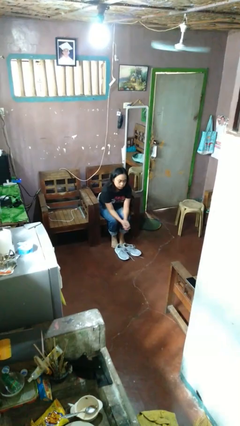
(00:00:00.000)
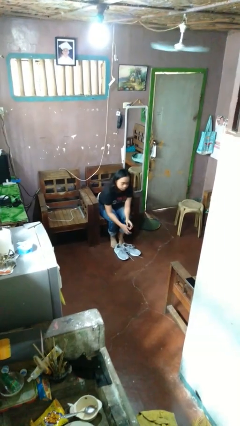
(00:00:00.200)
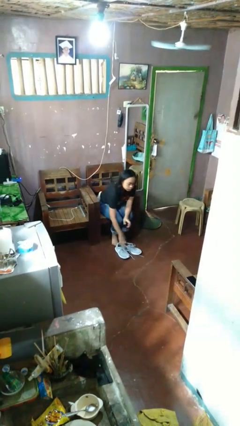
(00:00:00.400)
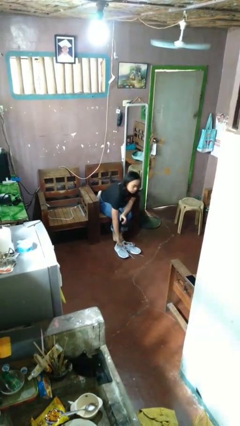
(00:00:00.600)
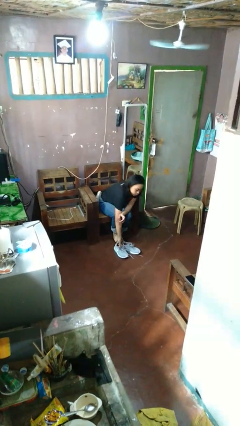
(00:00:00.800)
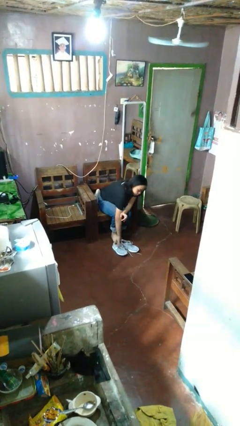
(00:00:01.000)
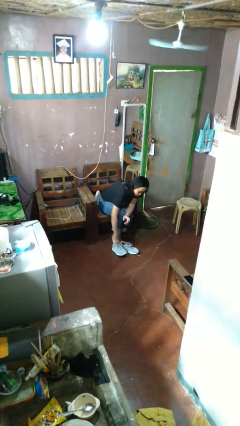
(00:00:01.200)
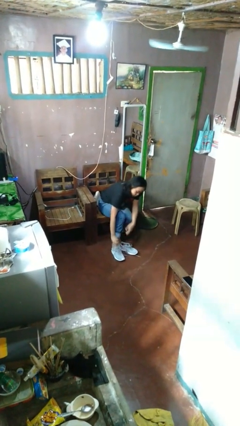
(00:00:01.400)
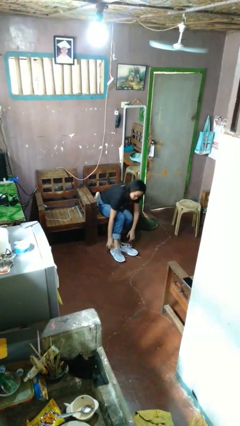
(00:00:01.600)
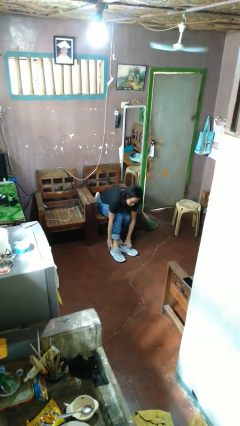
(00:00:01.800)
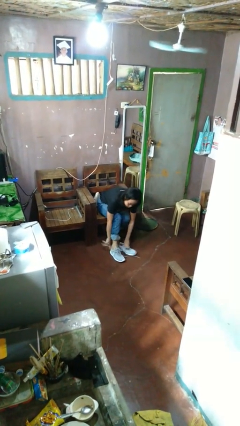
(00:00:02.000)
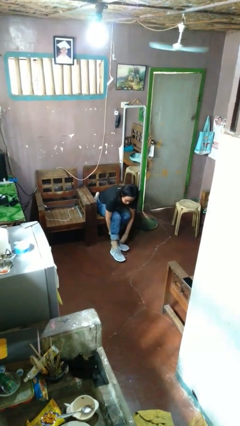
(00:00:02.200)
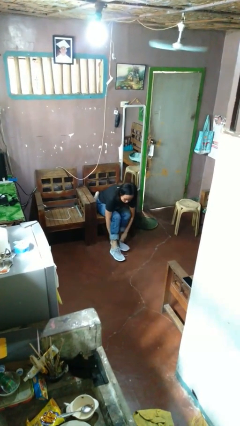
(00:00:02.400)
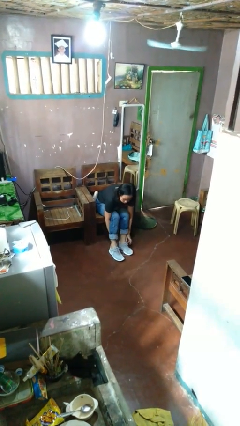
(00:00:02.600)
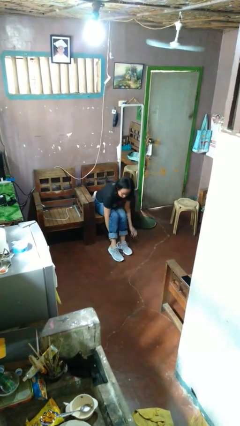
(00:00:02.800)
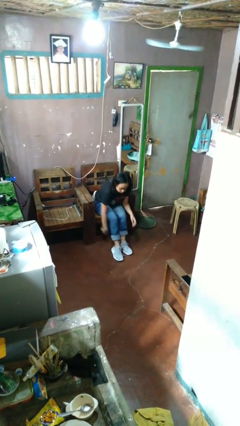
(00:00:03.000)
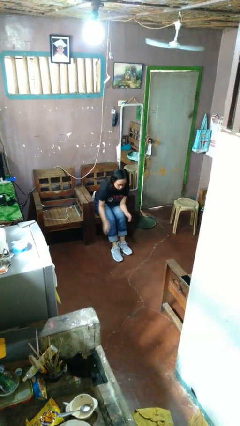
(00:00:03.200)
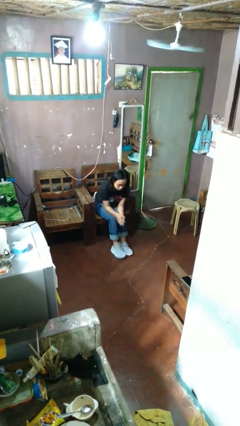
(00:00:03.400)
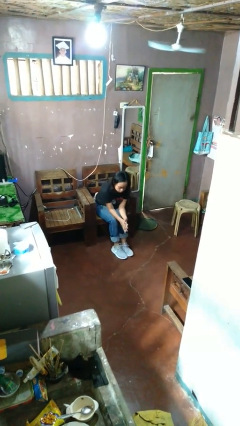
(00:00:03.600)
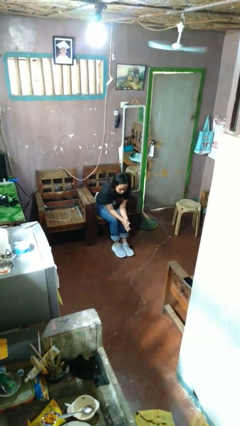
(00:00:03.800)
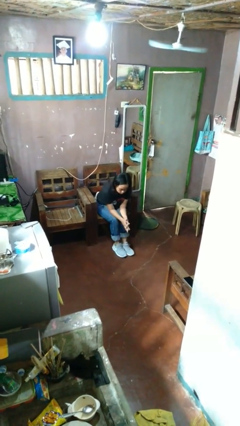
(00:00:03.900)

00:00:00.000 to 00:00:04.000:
person puts on shoes

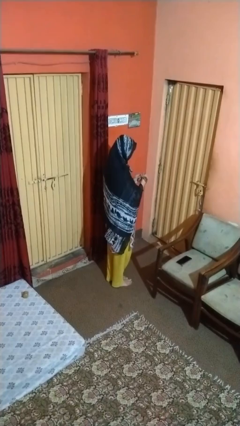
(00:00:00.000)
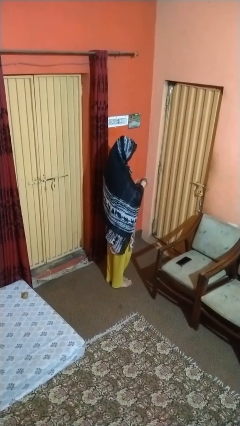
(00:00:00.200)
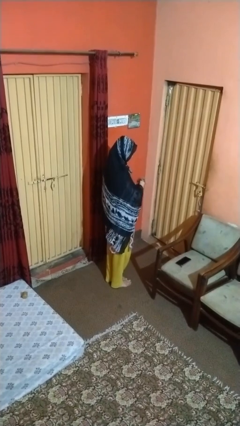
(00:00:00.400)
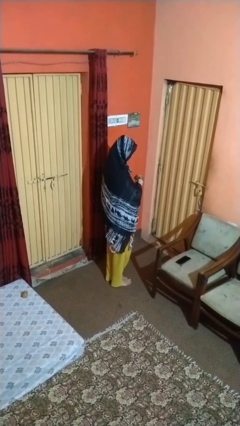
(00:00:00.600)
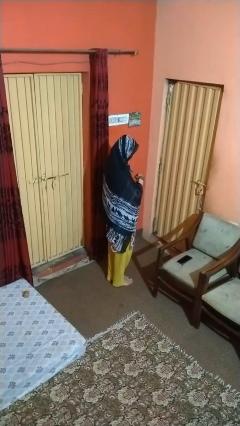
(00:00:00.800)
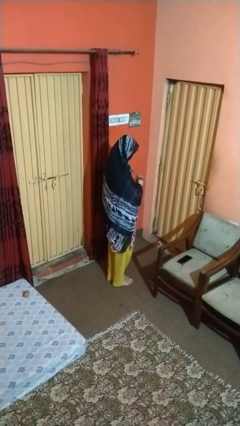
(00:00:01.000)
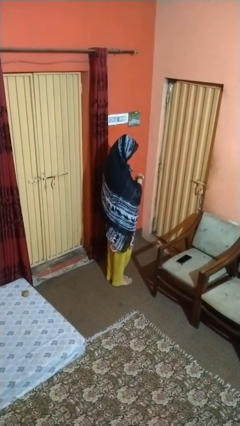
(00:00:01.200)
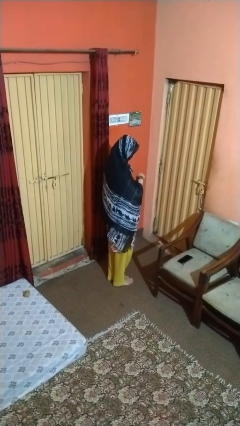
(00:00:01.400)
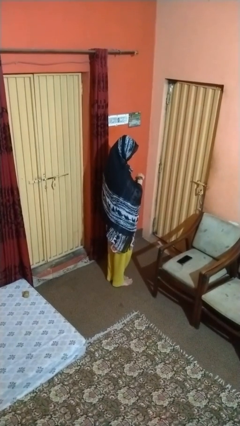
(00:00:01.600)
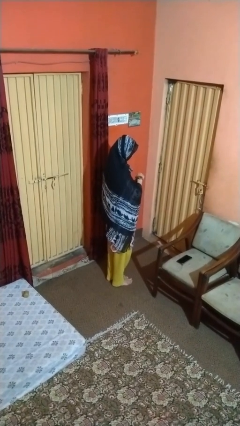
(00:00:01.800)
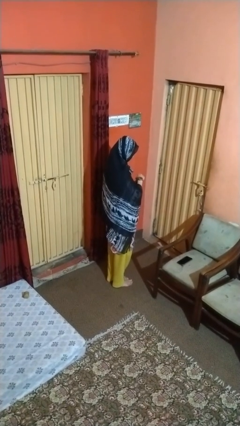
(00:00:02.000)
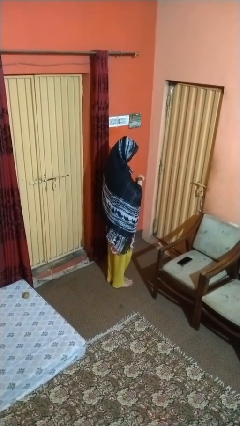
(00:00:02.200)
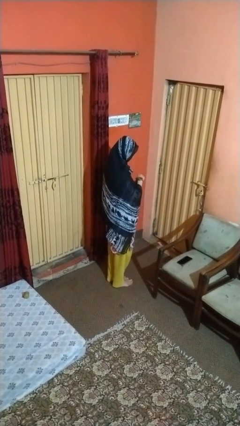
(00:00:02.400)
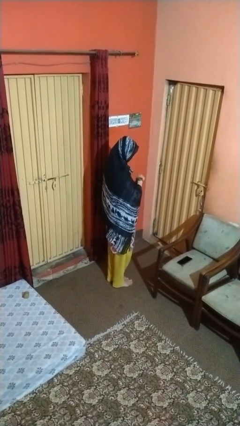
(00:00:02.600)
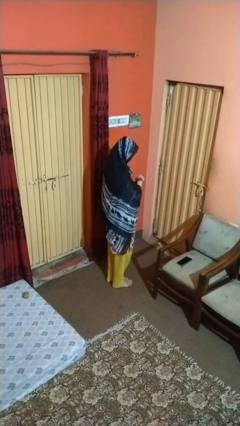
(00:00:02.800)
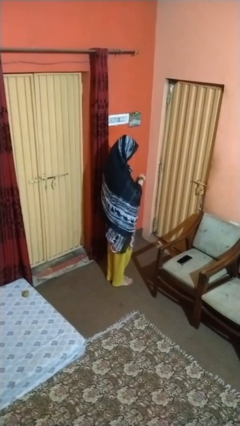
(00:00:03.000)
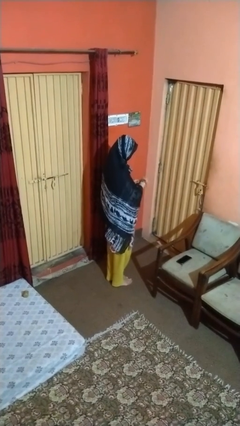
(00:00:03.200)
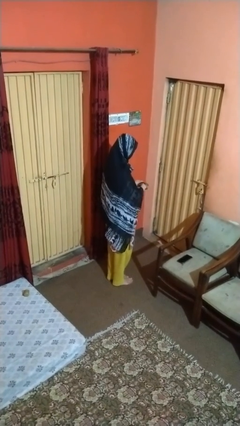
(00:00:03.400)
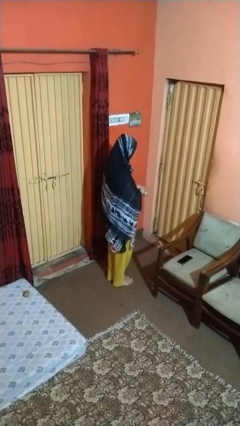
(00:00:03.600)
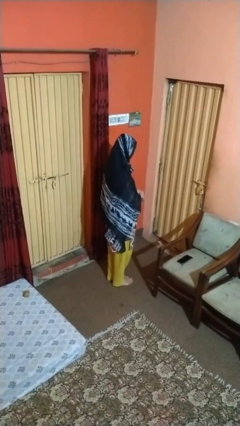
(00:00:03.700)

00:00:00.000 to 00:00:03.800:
person puts on wristwatch

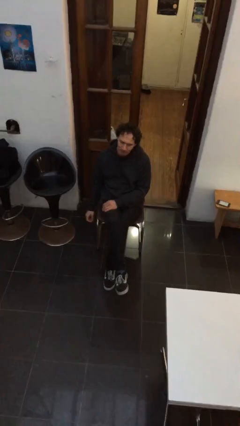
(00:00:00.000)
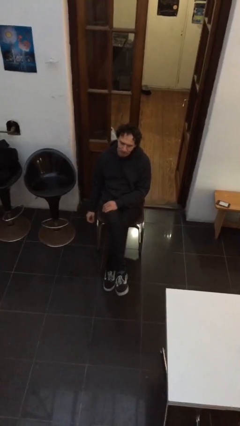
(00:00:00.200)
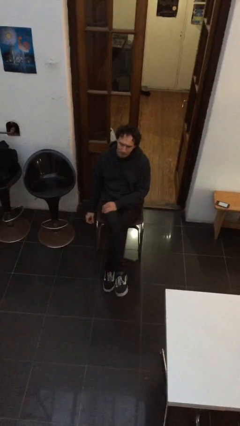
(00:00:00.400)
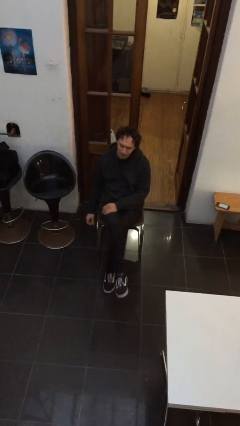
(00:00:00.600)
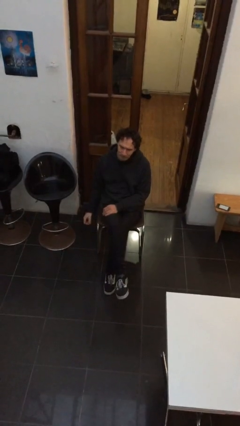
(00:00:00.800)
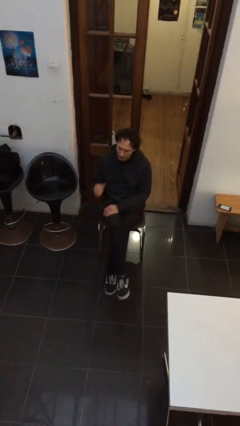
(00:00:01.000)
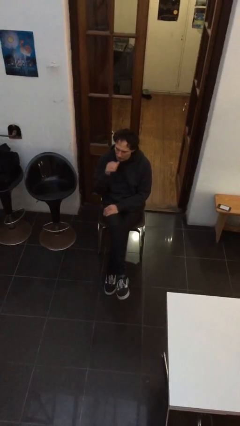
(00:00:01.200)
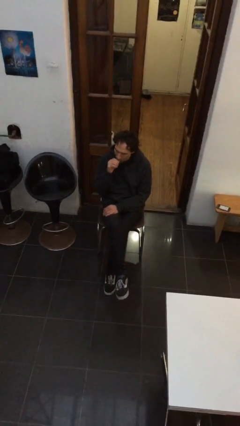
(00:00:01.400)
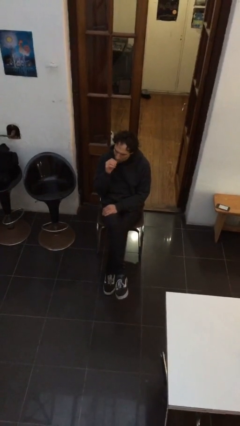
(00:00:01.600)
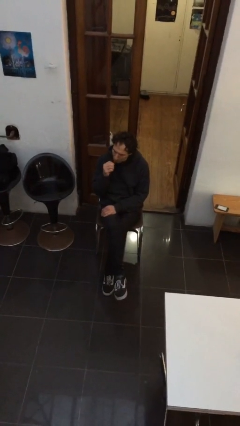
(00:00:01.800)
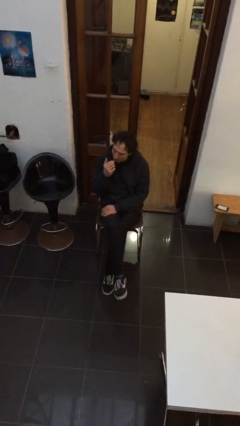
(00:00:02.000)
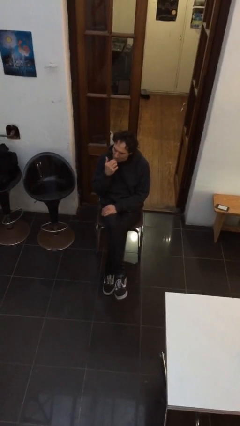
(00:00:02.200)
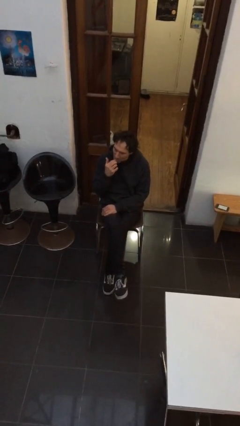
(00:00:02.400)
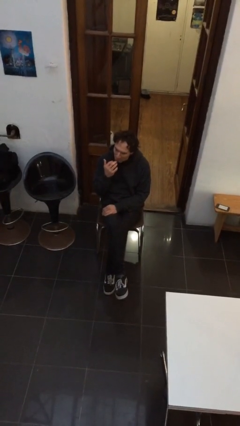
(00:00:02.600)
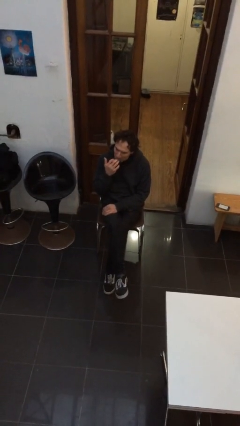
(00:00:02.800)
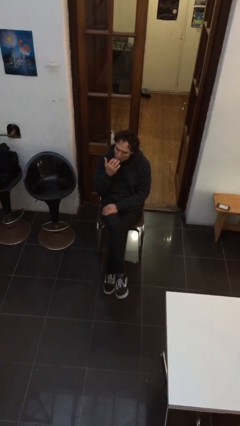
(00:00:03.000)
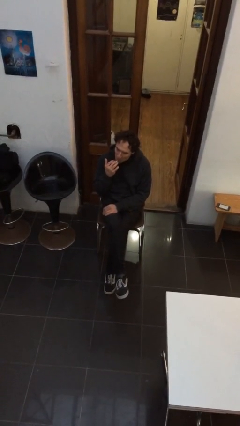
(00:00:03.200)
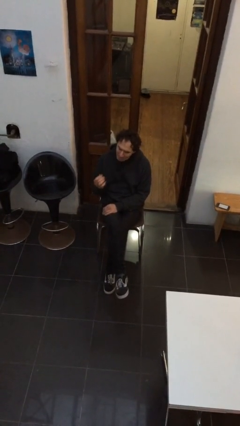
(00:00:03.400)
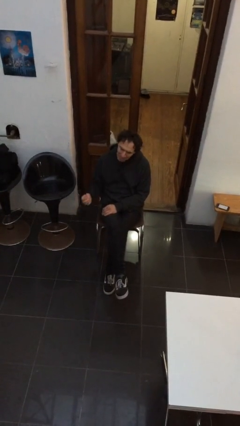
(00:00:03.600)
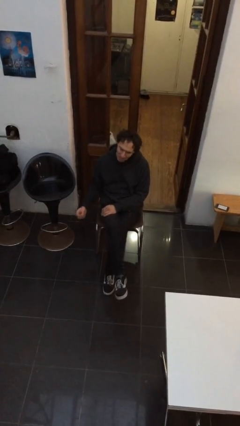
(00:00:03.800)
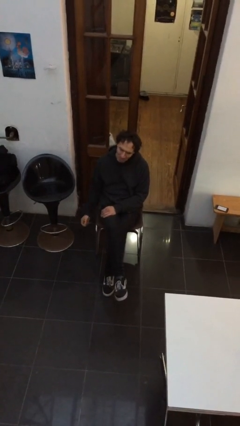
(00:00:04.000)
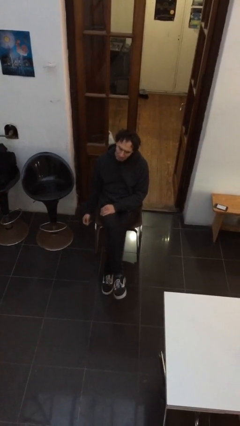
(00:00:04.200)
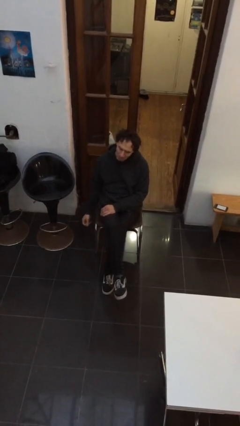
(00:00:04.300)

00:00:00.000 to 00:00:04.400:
person licks fingers

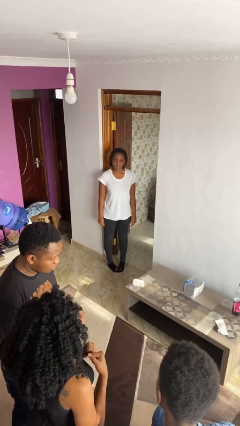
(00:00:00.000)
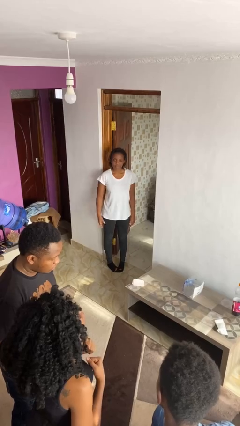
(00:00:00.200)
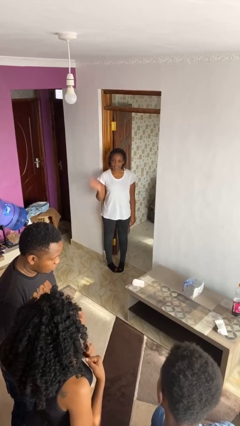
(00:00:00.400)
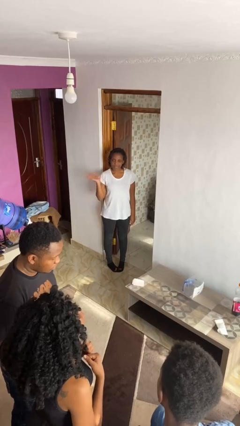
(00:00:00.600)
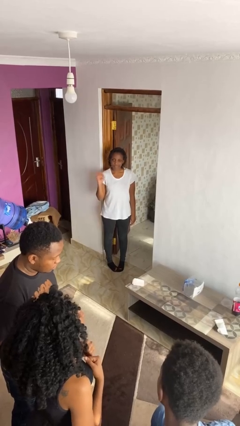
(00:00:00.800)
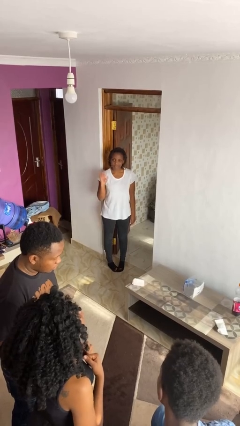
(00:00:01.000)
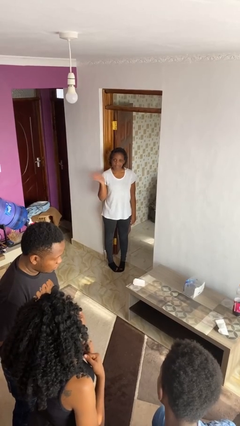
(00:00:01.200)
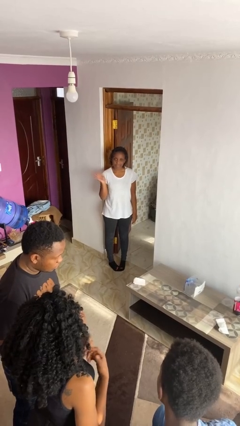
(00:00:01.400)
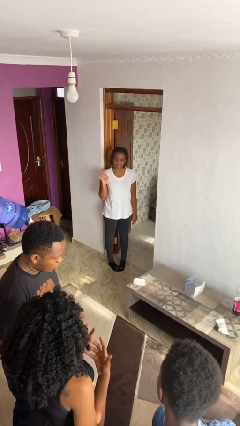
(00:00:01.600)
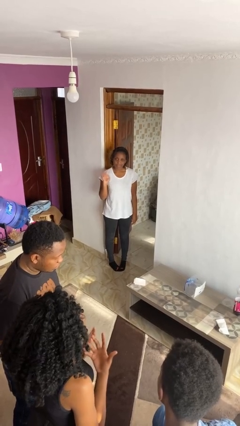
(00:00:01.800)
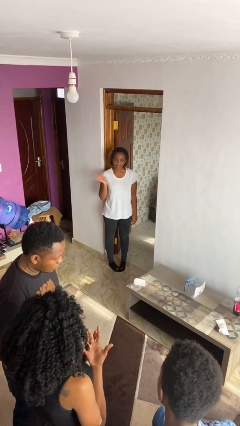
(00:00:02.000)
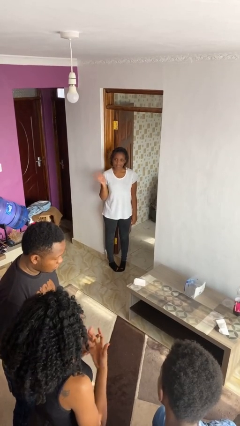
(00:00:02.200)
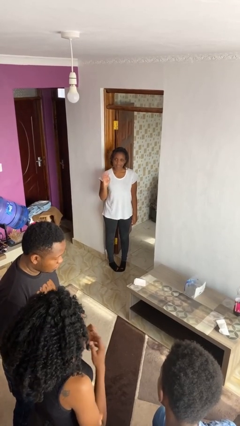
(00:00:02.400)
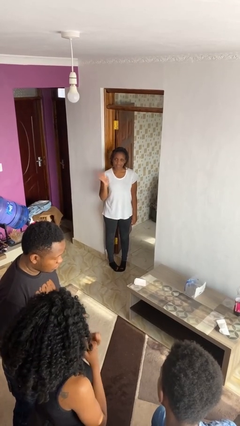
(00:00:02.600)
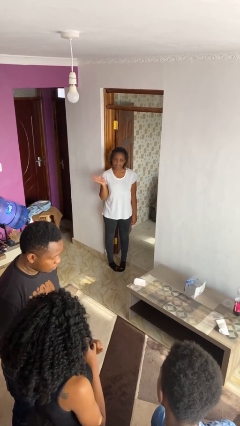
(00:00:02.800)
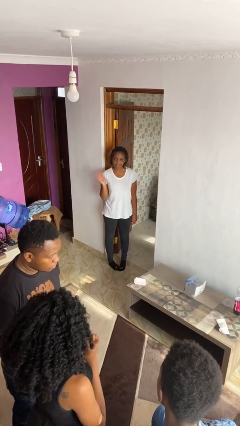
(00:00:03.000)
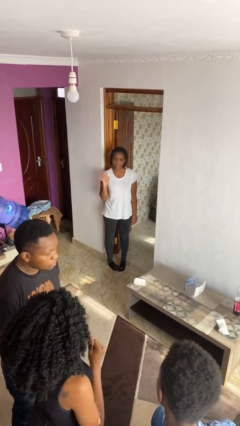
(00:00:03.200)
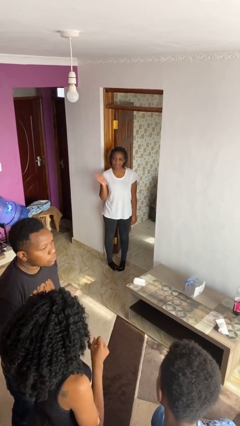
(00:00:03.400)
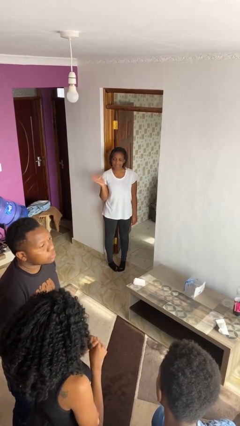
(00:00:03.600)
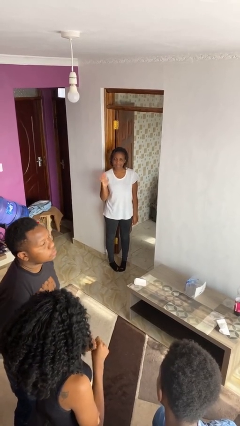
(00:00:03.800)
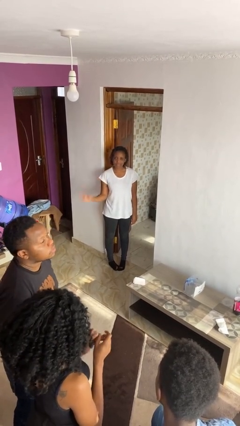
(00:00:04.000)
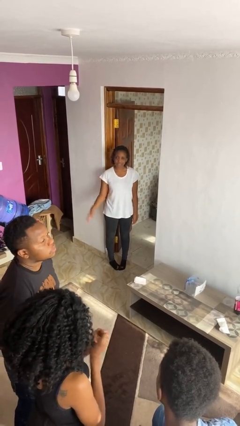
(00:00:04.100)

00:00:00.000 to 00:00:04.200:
person waves at person

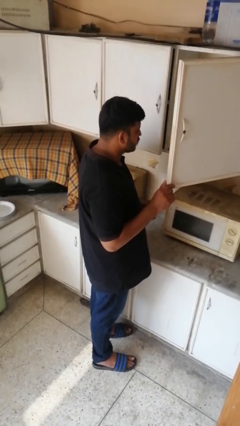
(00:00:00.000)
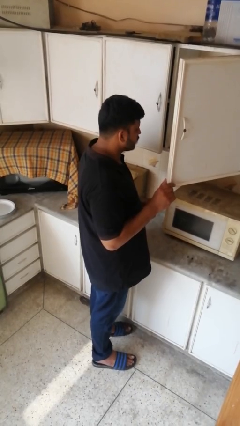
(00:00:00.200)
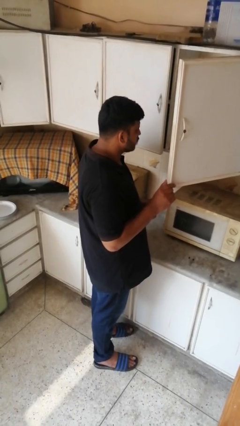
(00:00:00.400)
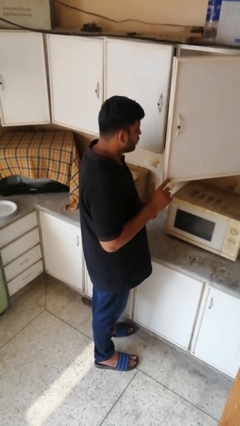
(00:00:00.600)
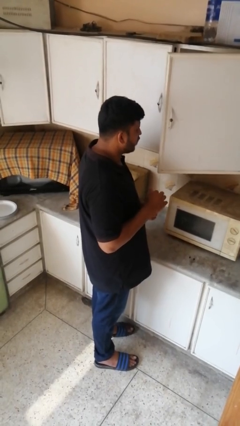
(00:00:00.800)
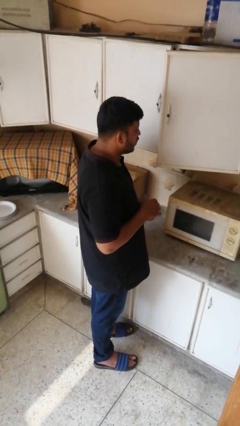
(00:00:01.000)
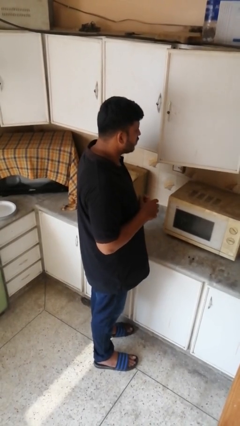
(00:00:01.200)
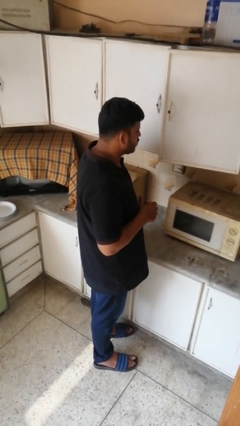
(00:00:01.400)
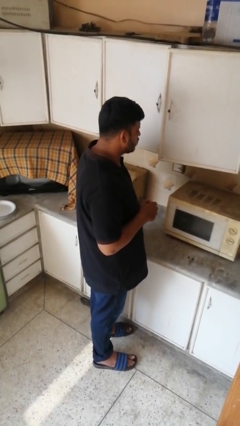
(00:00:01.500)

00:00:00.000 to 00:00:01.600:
person closes cabinet
